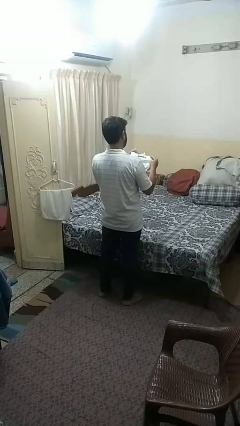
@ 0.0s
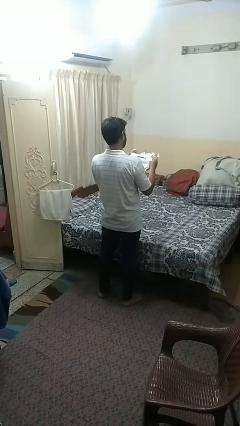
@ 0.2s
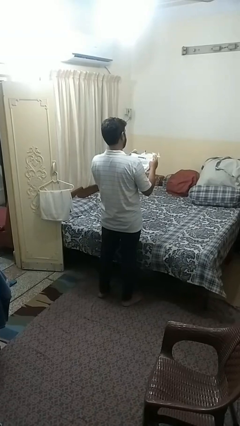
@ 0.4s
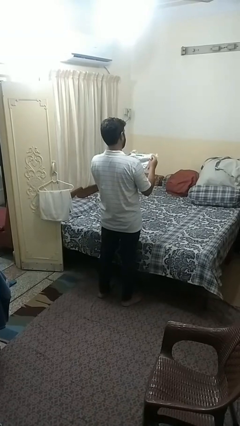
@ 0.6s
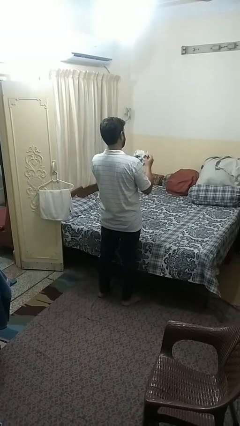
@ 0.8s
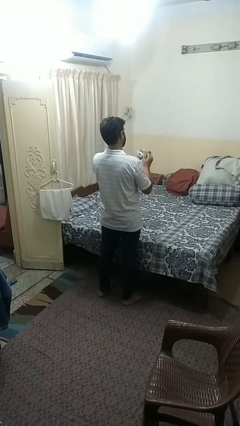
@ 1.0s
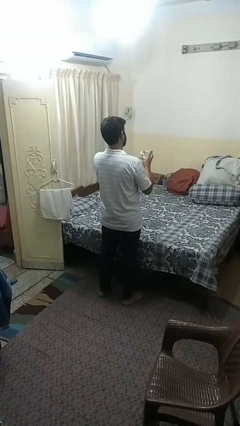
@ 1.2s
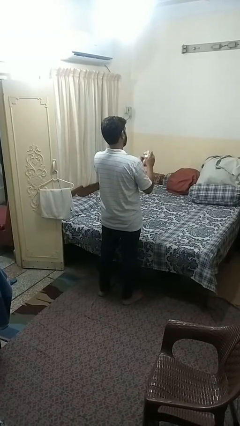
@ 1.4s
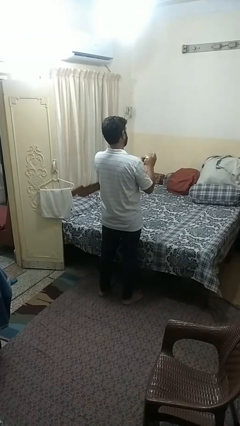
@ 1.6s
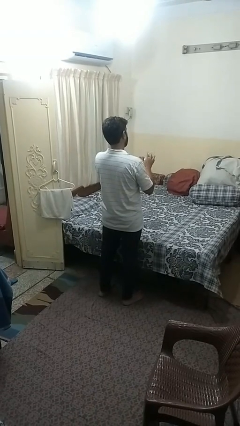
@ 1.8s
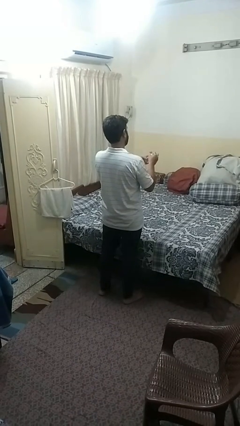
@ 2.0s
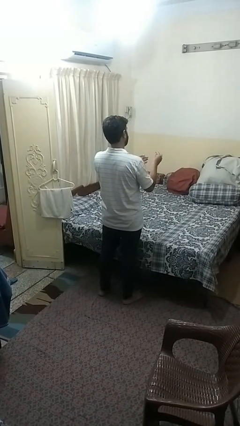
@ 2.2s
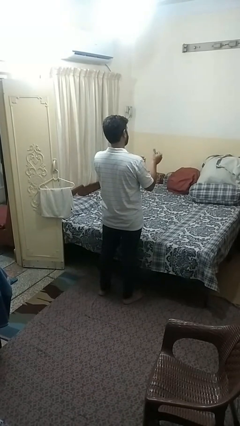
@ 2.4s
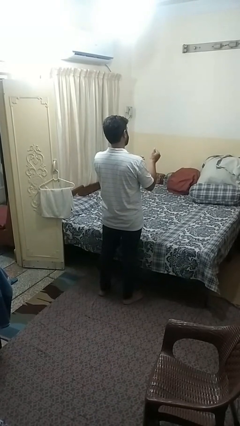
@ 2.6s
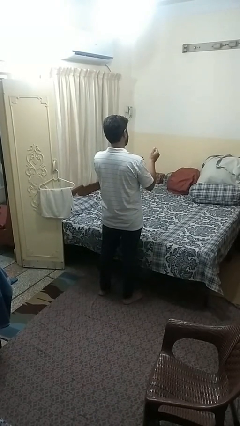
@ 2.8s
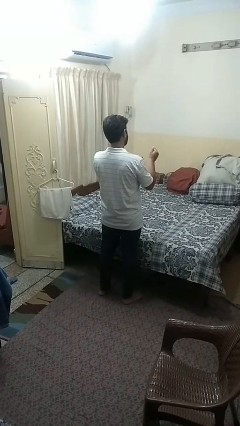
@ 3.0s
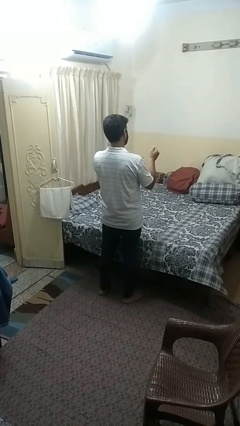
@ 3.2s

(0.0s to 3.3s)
person crumples paper

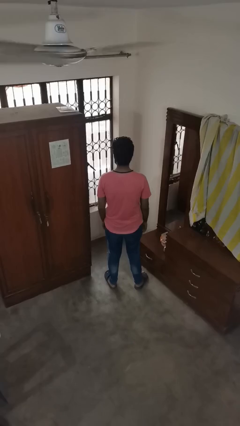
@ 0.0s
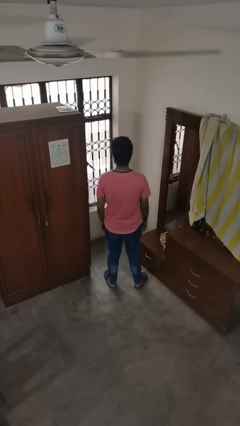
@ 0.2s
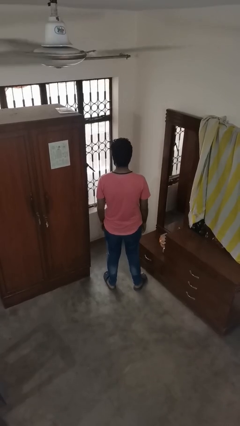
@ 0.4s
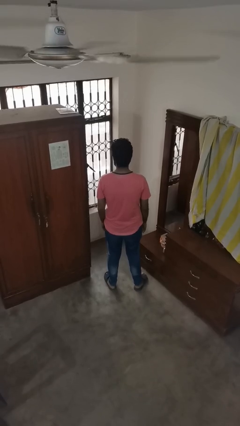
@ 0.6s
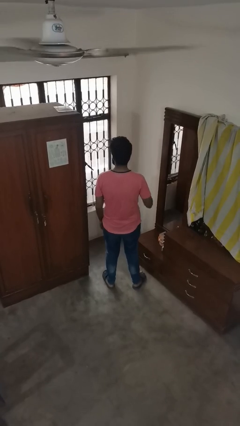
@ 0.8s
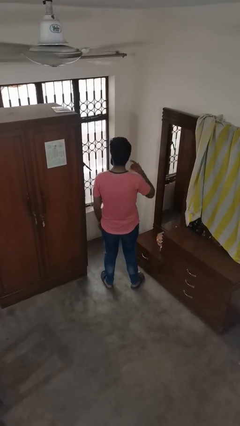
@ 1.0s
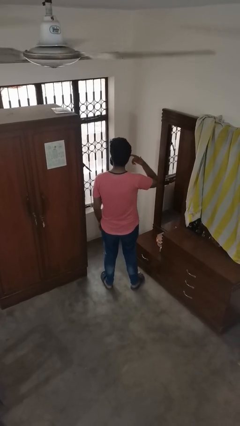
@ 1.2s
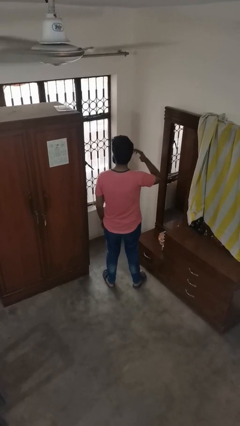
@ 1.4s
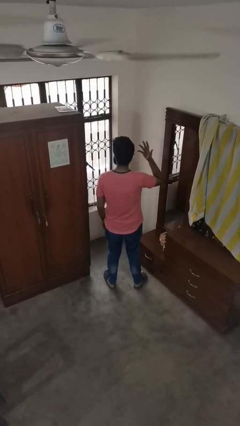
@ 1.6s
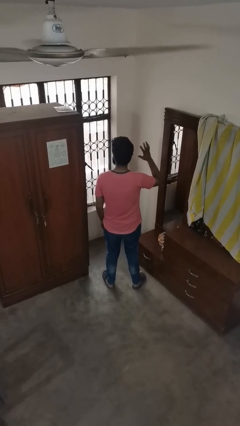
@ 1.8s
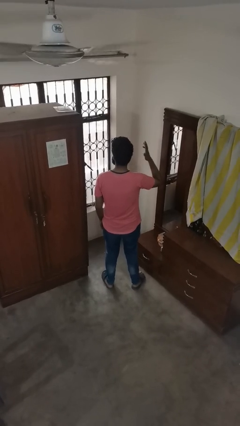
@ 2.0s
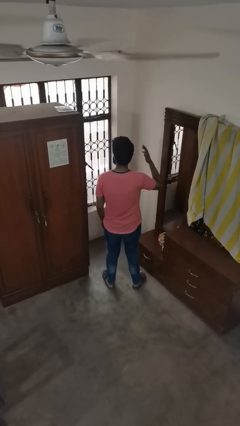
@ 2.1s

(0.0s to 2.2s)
person puts fingers in ear

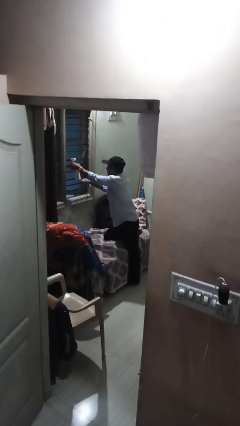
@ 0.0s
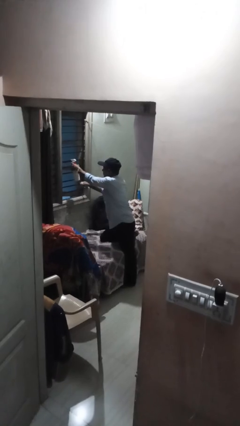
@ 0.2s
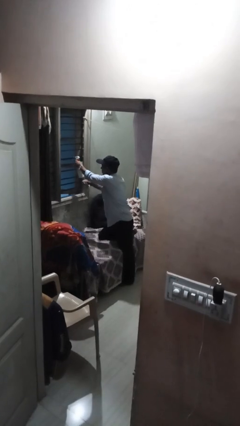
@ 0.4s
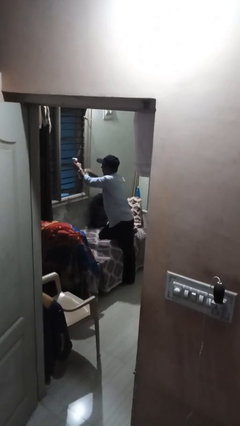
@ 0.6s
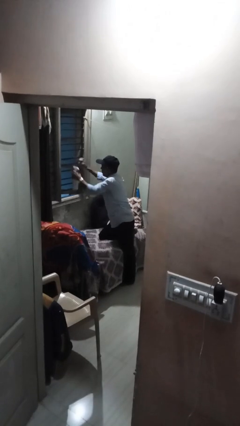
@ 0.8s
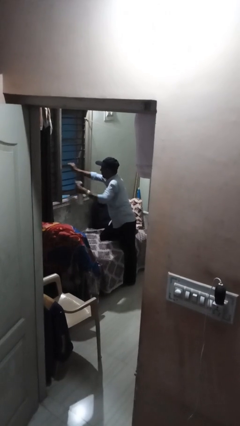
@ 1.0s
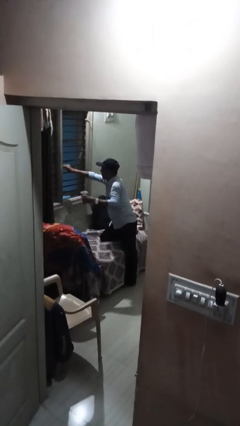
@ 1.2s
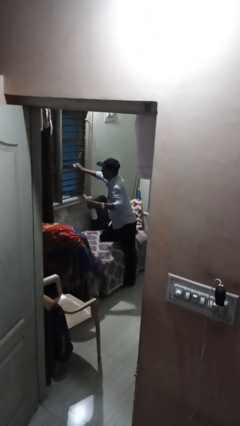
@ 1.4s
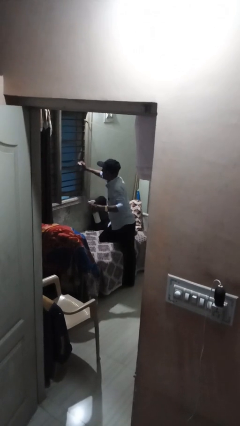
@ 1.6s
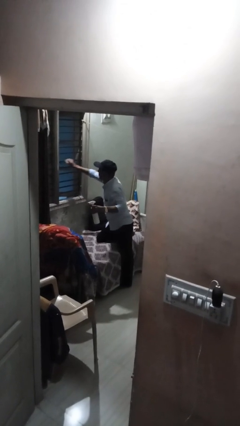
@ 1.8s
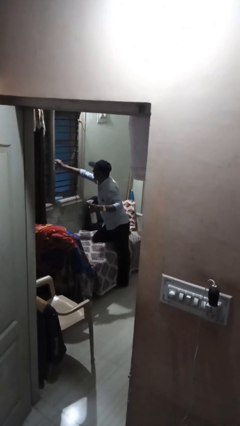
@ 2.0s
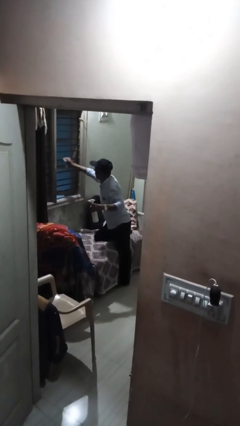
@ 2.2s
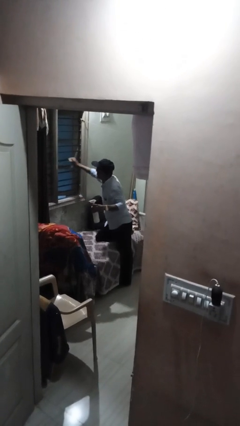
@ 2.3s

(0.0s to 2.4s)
person washes window

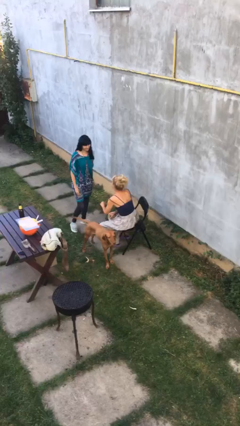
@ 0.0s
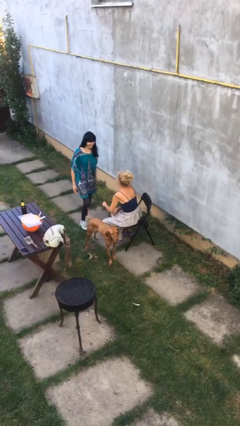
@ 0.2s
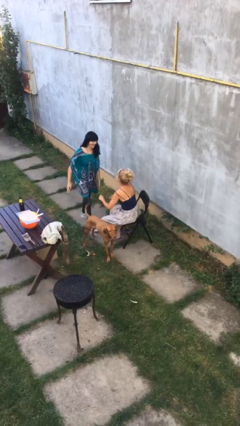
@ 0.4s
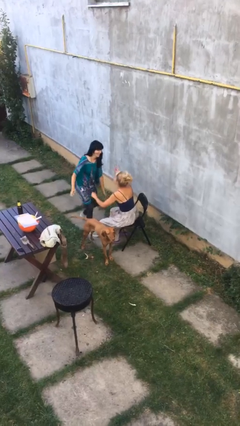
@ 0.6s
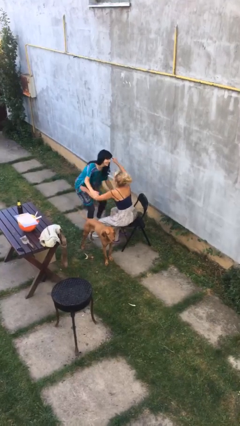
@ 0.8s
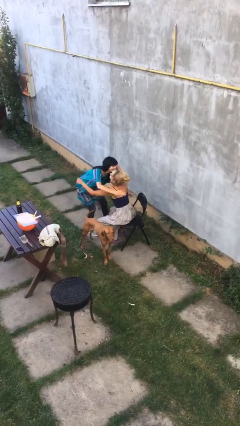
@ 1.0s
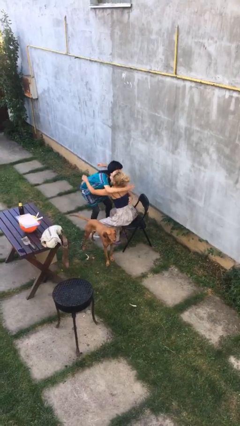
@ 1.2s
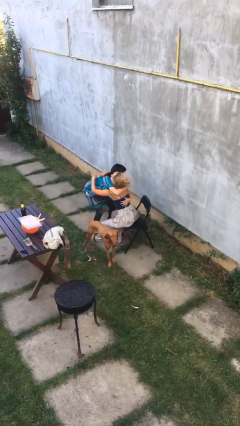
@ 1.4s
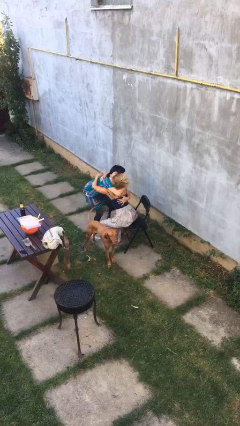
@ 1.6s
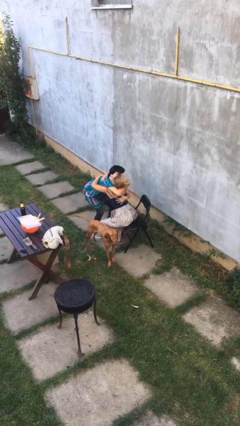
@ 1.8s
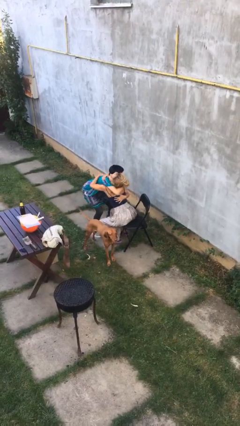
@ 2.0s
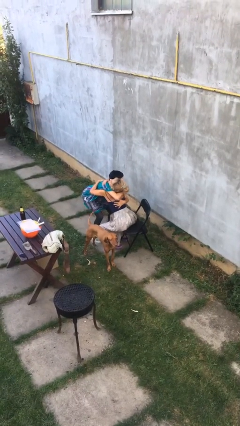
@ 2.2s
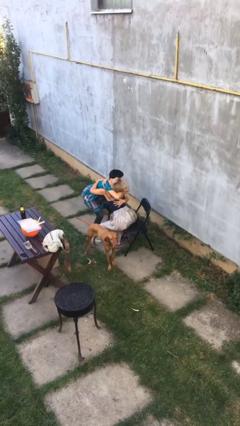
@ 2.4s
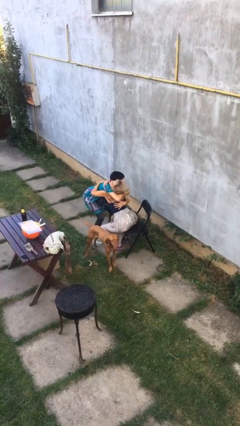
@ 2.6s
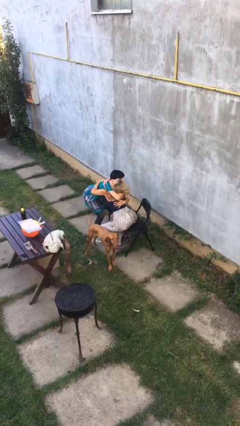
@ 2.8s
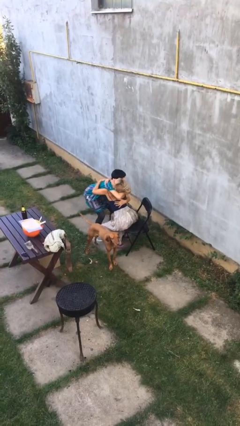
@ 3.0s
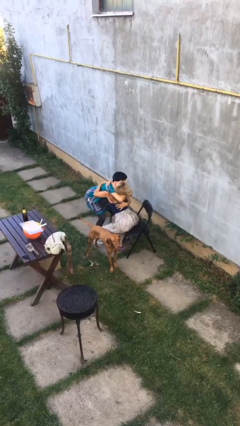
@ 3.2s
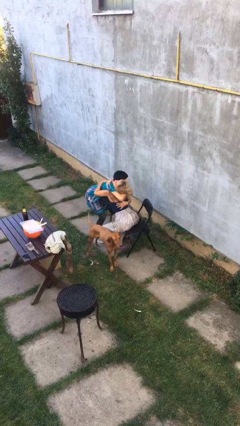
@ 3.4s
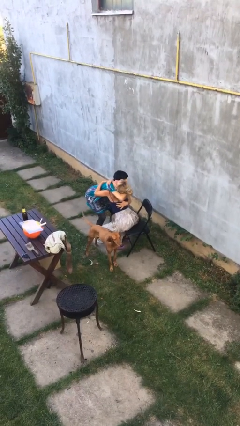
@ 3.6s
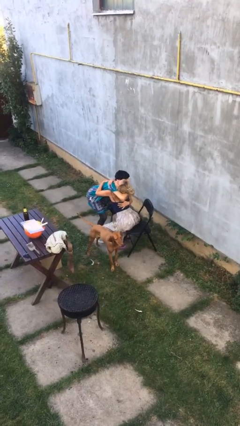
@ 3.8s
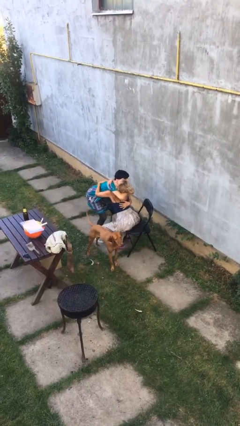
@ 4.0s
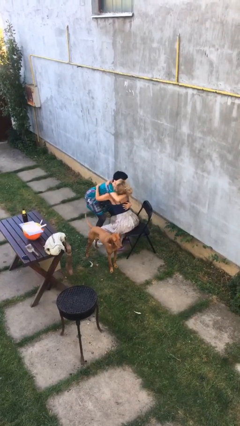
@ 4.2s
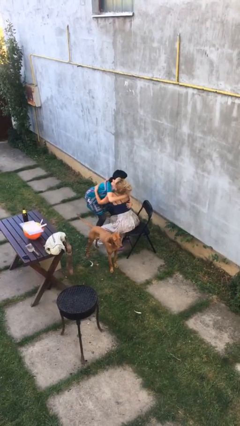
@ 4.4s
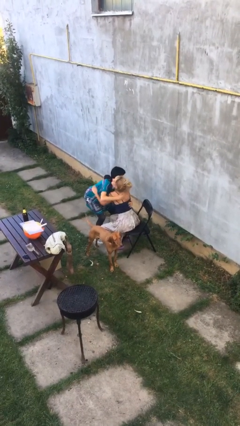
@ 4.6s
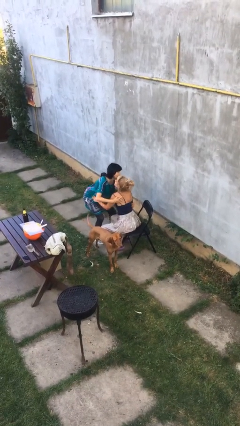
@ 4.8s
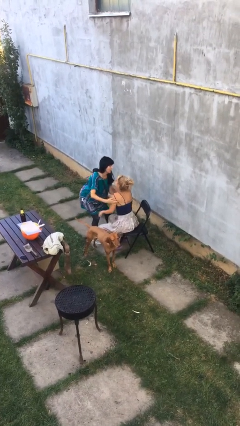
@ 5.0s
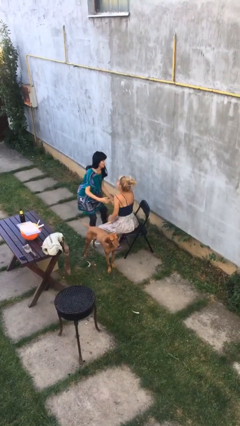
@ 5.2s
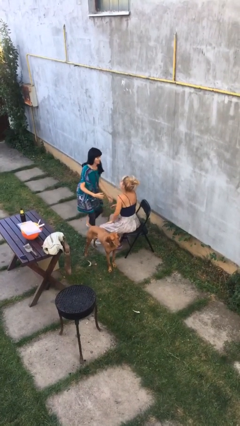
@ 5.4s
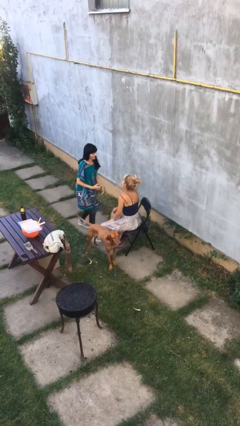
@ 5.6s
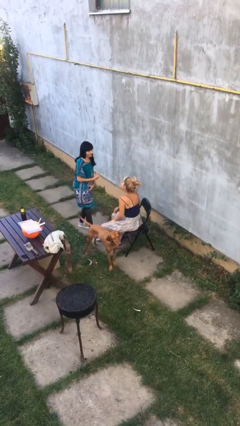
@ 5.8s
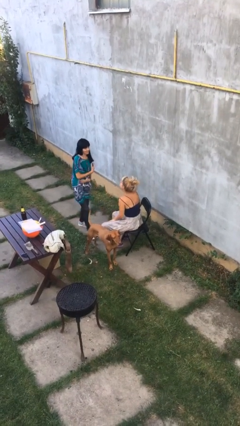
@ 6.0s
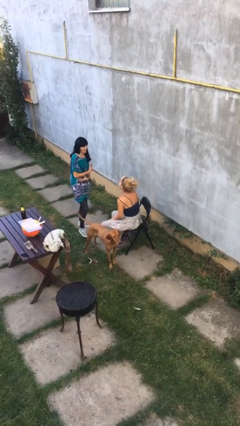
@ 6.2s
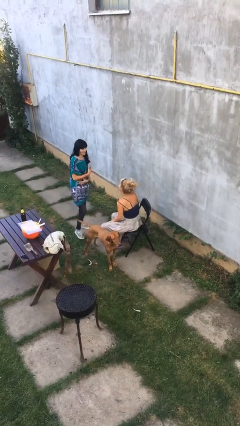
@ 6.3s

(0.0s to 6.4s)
person embraces person

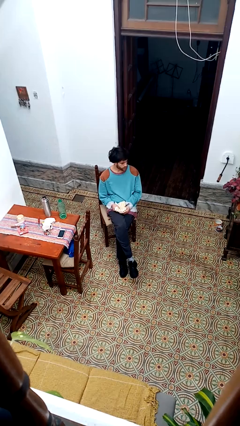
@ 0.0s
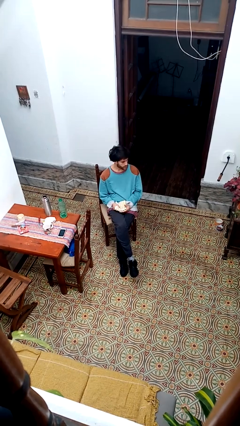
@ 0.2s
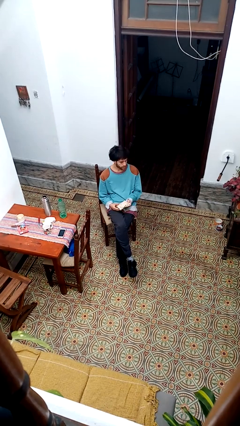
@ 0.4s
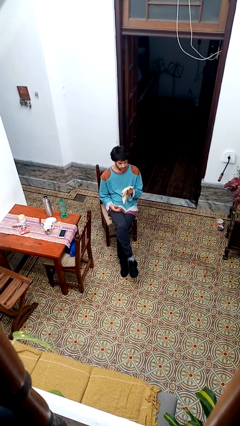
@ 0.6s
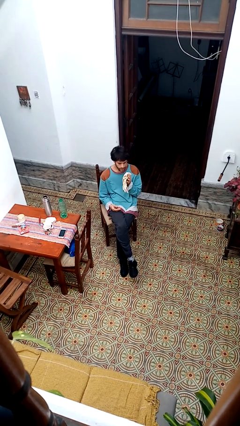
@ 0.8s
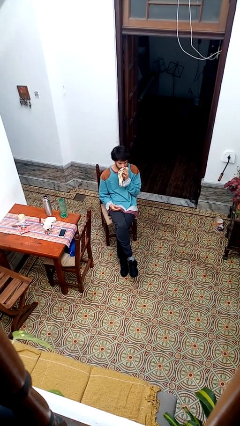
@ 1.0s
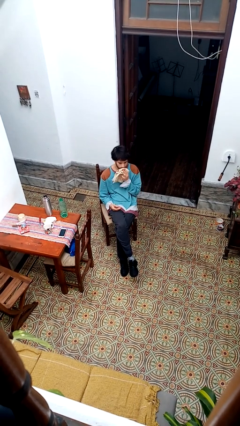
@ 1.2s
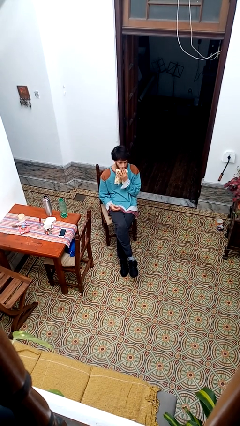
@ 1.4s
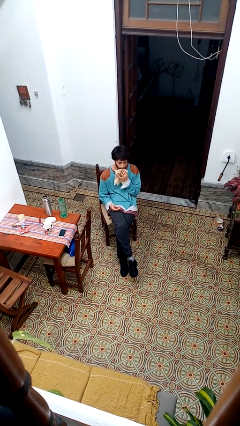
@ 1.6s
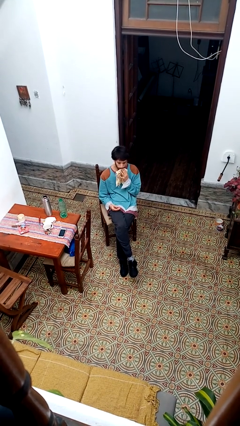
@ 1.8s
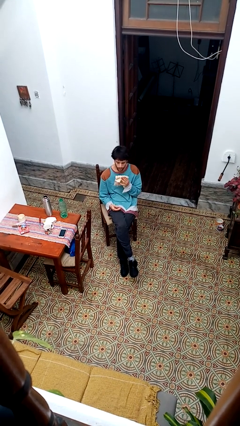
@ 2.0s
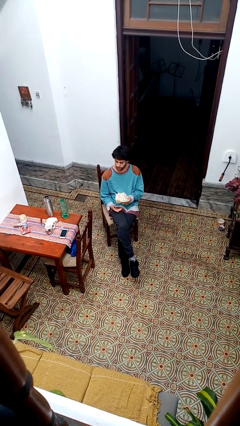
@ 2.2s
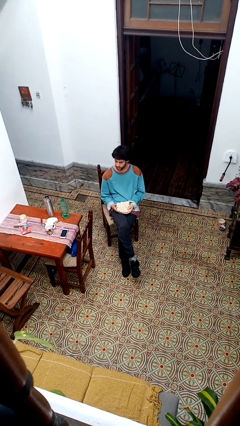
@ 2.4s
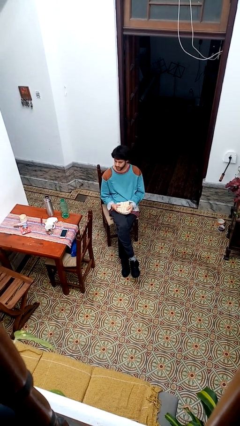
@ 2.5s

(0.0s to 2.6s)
person wipes mouth with napkin

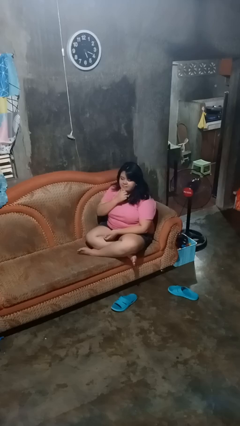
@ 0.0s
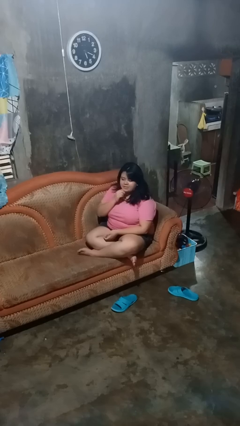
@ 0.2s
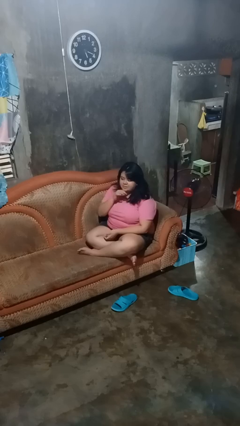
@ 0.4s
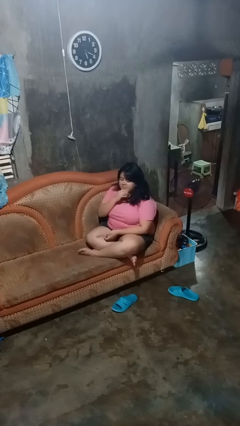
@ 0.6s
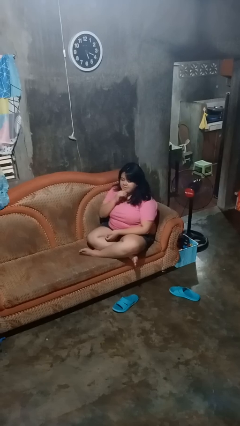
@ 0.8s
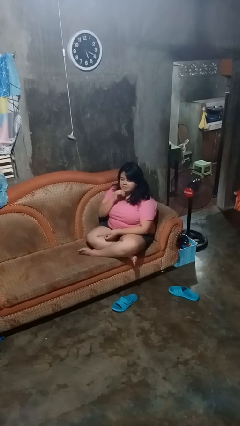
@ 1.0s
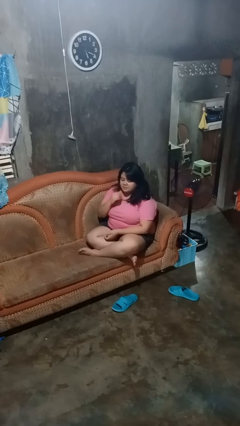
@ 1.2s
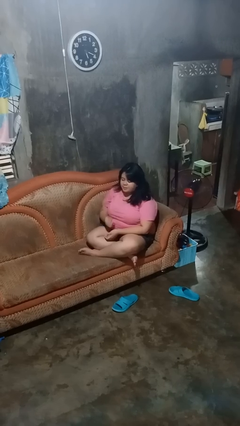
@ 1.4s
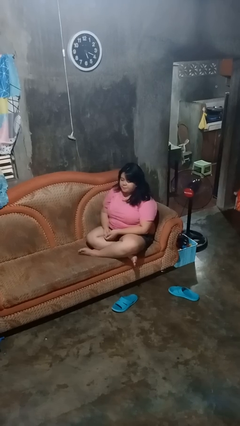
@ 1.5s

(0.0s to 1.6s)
person strokes chin
